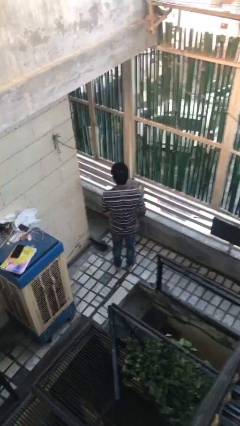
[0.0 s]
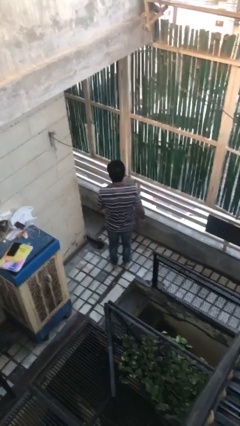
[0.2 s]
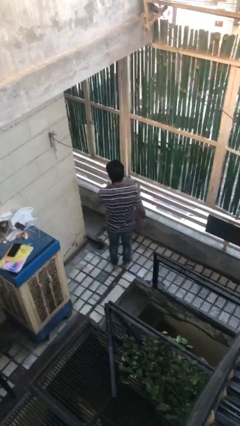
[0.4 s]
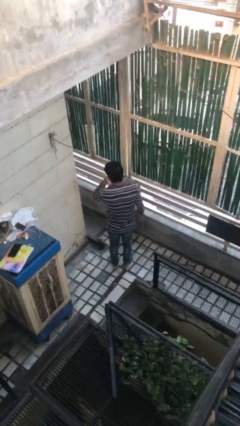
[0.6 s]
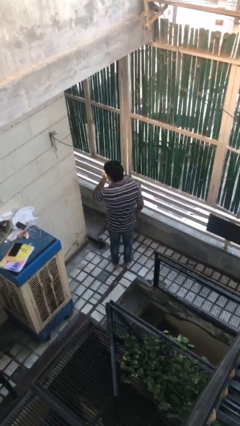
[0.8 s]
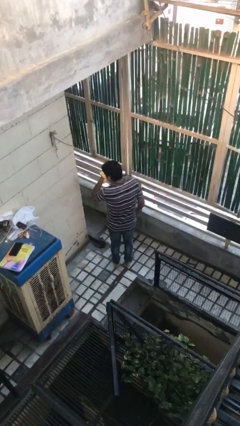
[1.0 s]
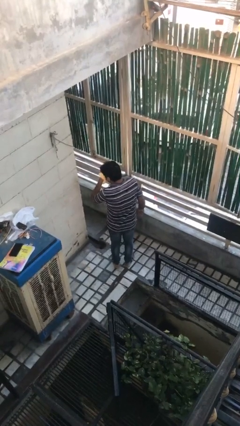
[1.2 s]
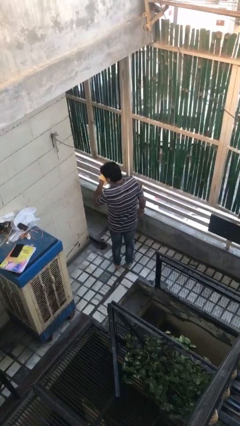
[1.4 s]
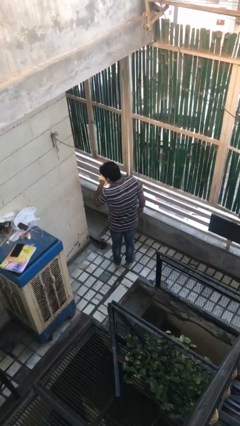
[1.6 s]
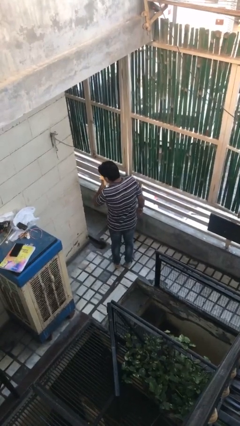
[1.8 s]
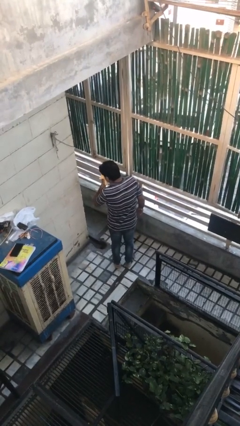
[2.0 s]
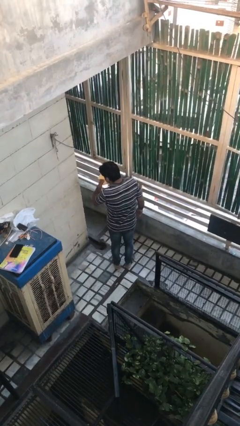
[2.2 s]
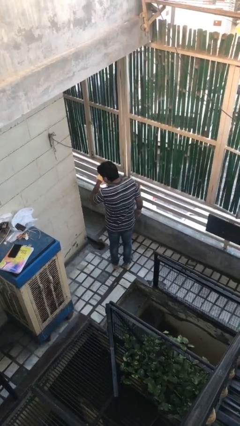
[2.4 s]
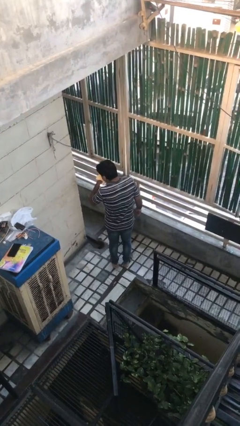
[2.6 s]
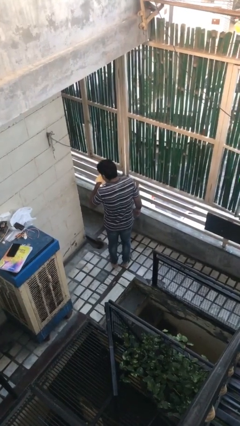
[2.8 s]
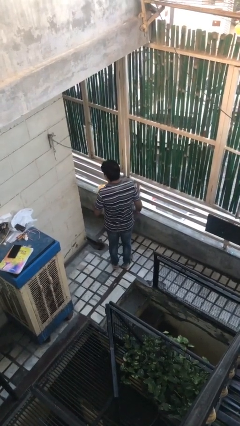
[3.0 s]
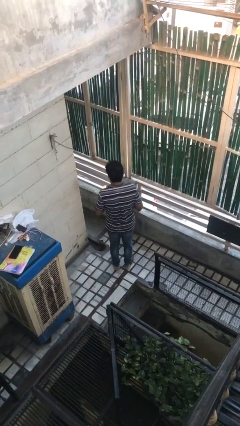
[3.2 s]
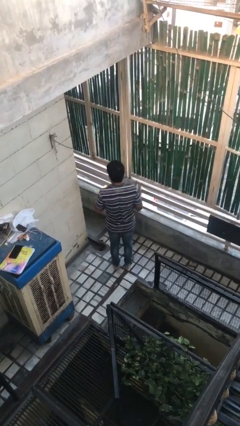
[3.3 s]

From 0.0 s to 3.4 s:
person blows nose

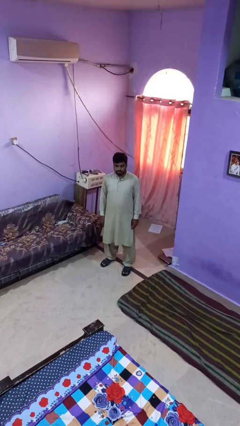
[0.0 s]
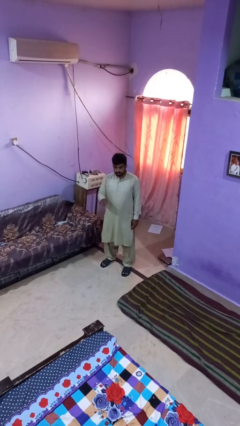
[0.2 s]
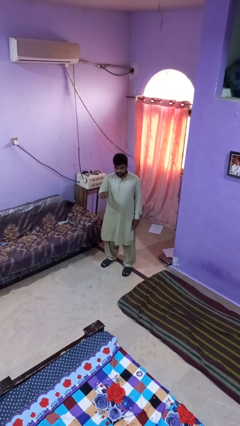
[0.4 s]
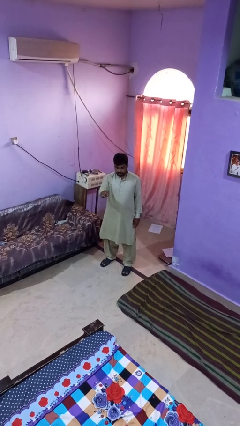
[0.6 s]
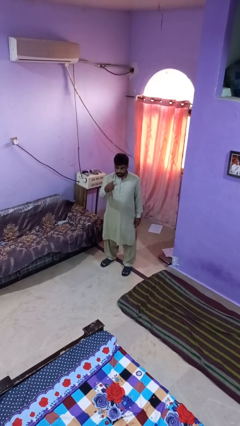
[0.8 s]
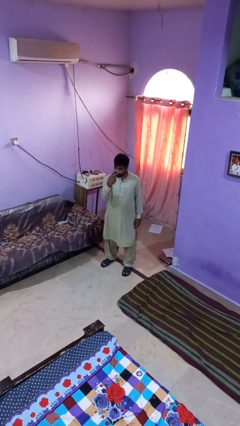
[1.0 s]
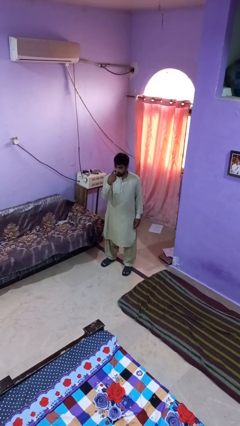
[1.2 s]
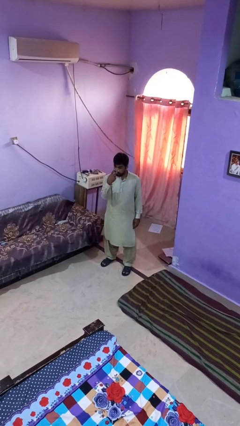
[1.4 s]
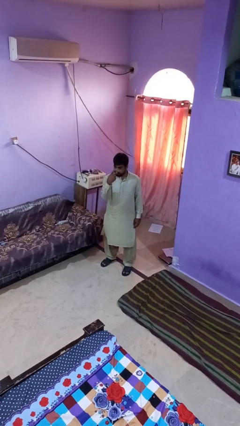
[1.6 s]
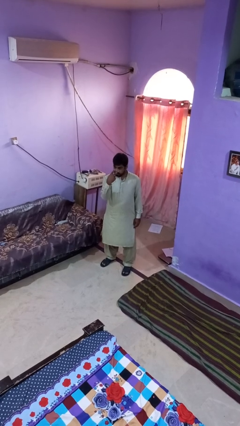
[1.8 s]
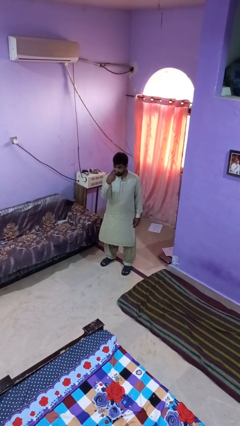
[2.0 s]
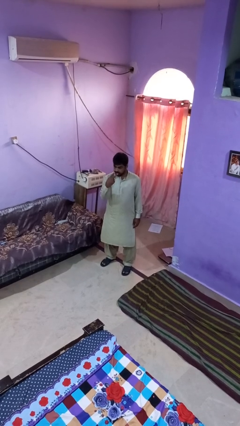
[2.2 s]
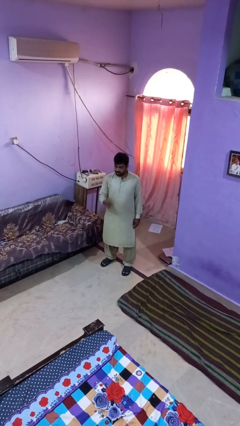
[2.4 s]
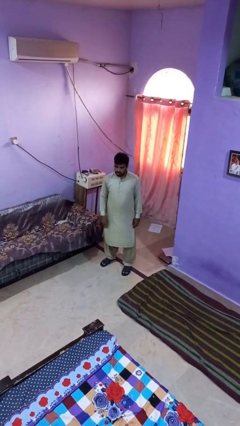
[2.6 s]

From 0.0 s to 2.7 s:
person gestures watch closely

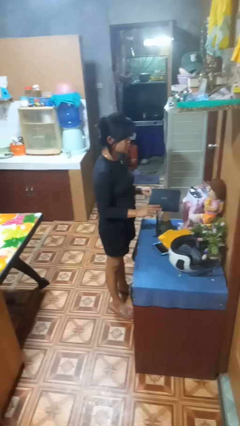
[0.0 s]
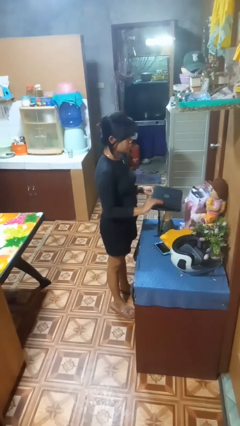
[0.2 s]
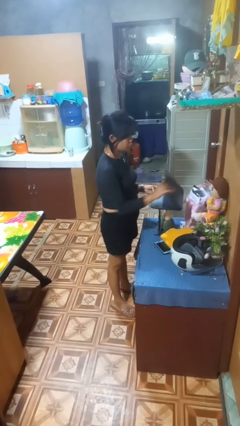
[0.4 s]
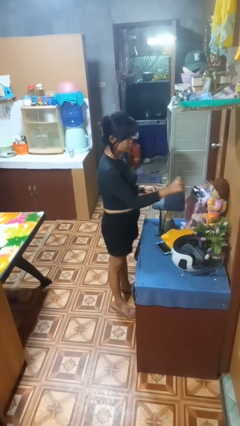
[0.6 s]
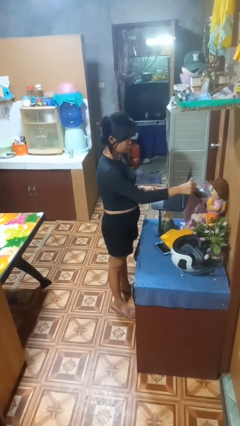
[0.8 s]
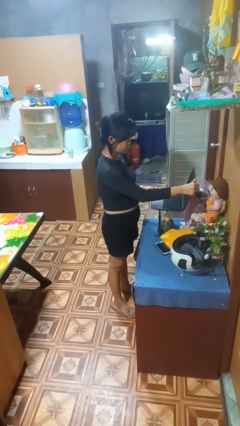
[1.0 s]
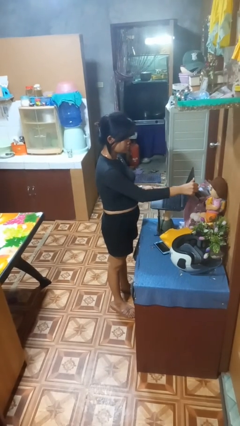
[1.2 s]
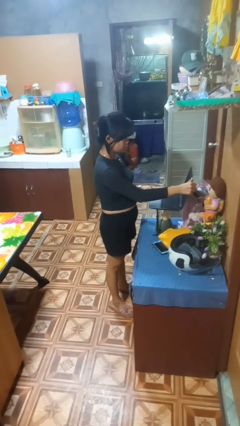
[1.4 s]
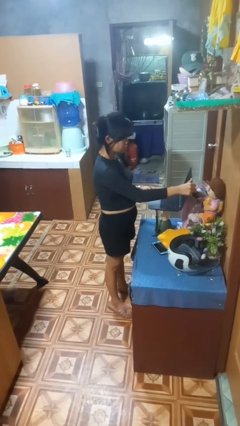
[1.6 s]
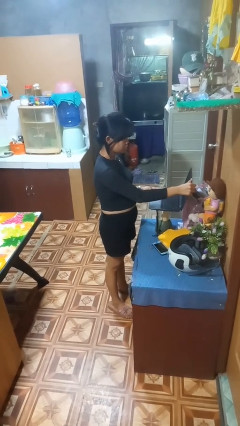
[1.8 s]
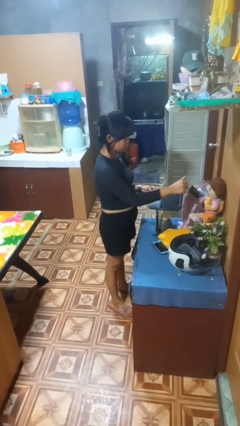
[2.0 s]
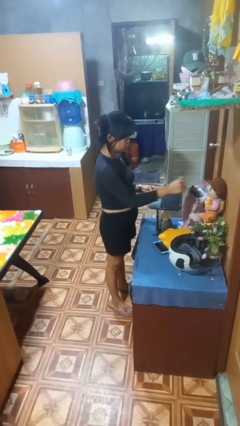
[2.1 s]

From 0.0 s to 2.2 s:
person opens laptop

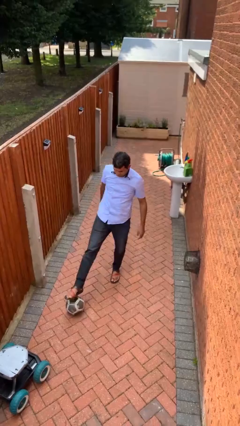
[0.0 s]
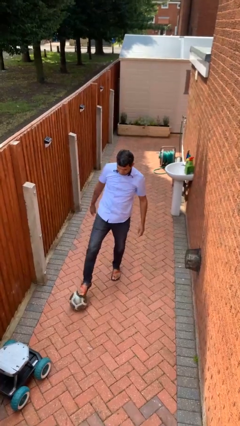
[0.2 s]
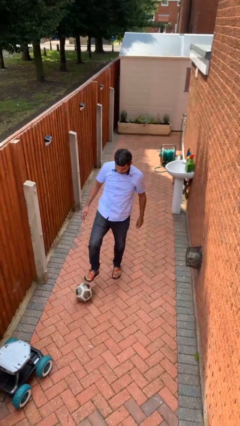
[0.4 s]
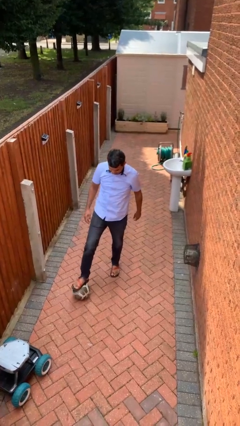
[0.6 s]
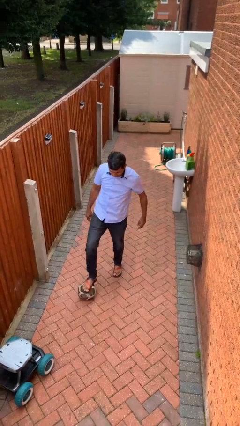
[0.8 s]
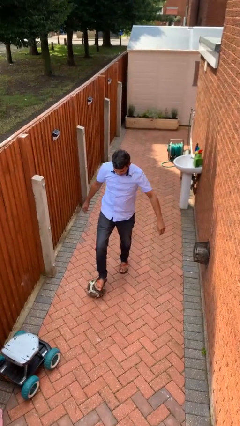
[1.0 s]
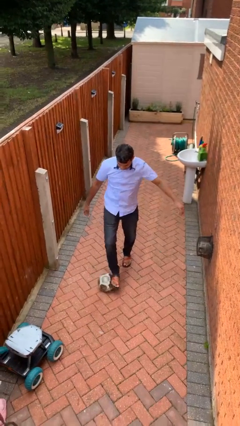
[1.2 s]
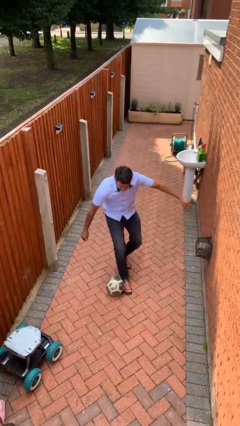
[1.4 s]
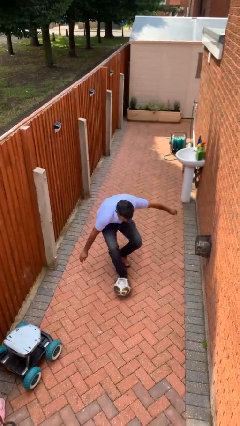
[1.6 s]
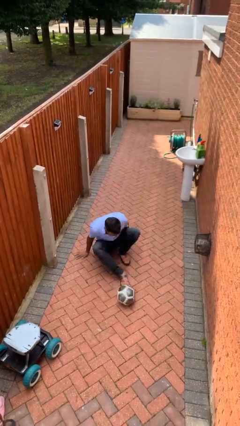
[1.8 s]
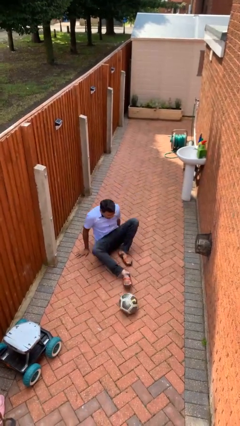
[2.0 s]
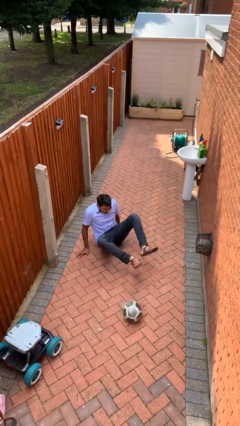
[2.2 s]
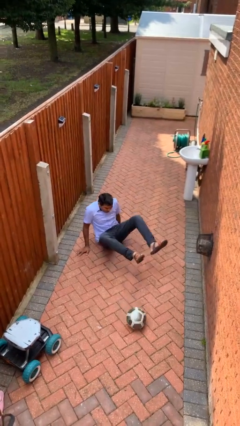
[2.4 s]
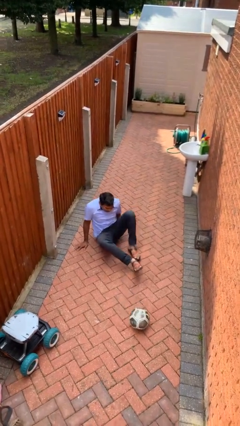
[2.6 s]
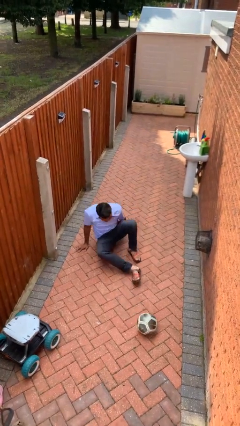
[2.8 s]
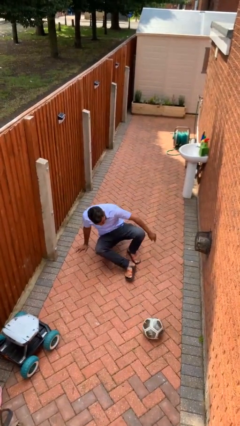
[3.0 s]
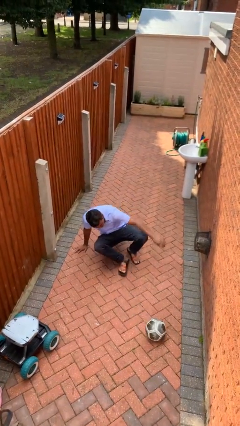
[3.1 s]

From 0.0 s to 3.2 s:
person trips on object on floor

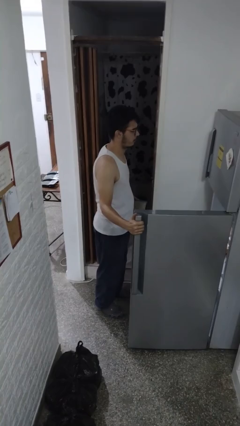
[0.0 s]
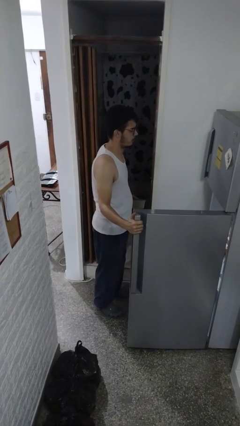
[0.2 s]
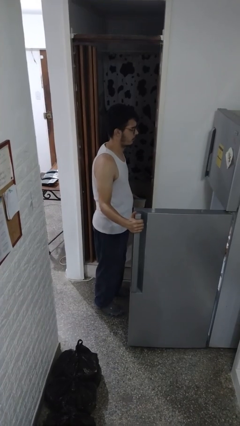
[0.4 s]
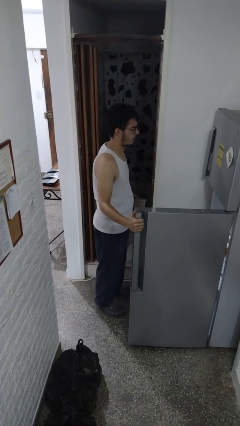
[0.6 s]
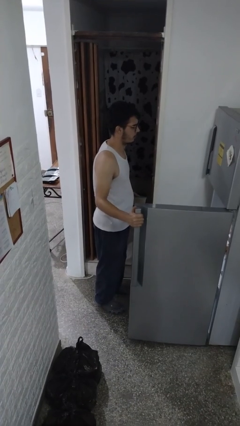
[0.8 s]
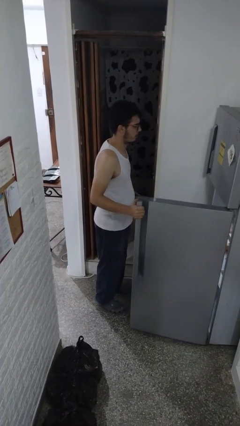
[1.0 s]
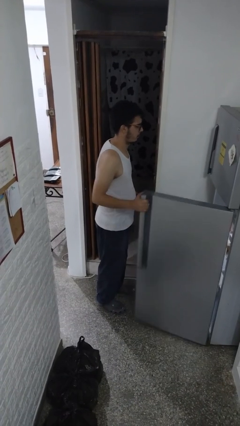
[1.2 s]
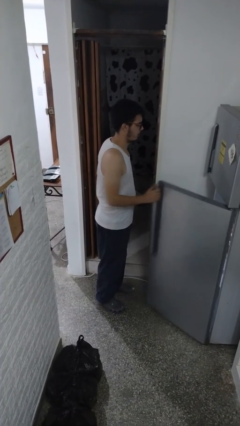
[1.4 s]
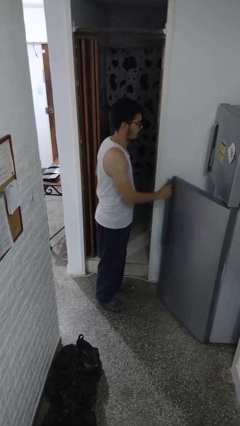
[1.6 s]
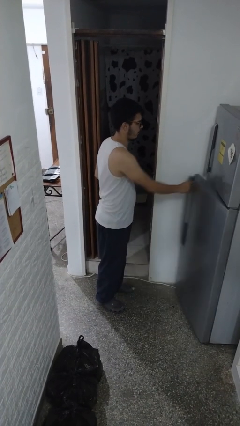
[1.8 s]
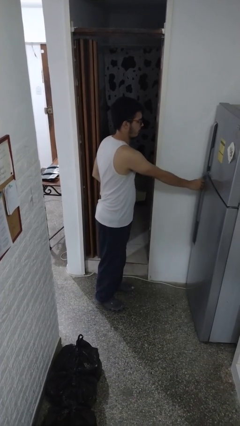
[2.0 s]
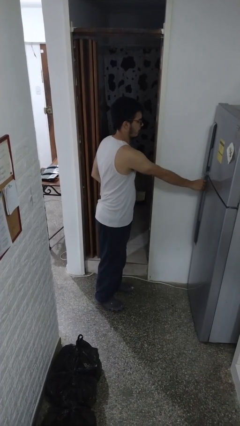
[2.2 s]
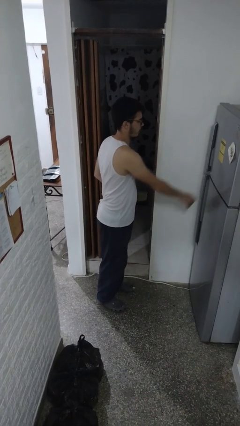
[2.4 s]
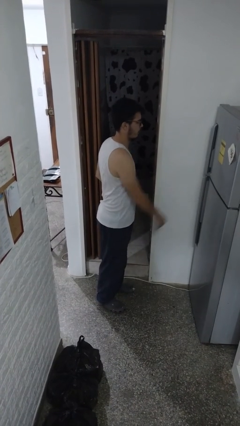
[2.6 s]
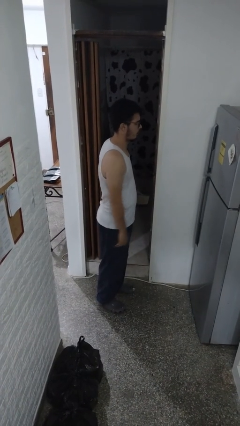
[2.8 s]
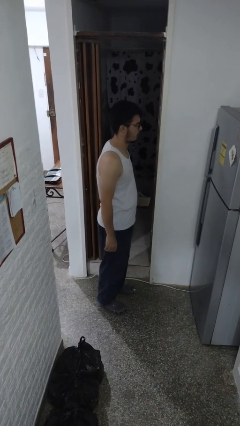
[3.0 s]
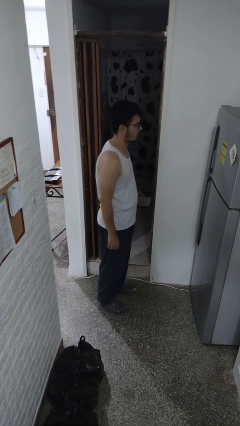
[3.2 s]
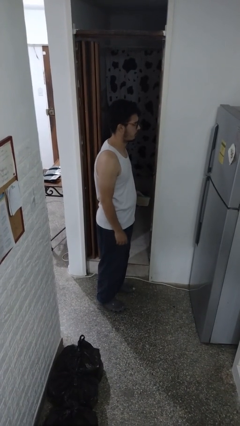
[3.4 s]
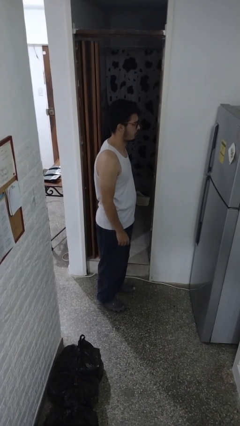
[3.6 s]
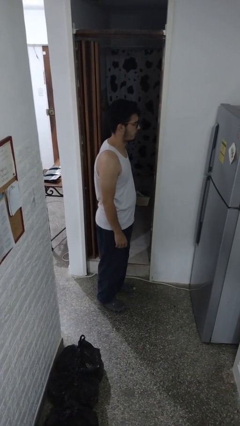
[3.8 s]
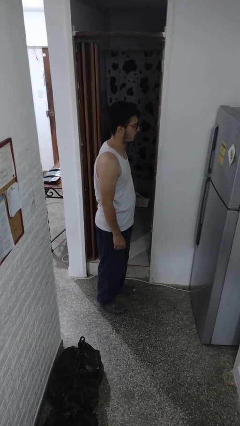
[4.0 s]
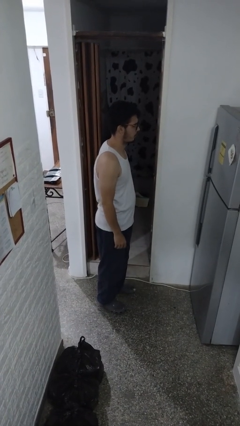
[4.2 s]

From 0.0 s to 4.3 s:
person closes refrigerator

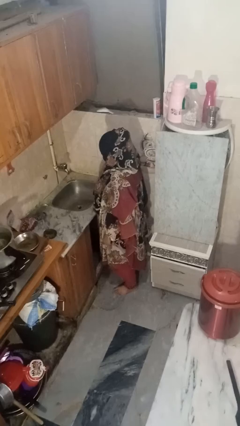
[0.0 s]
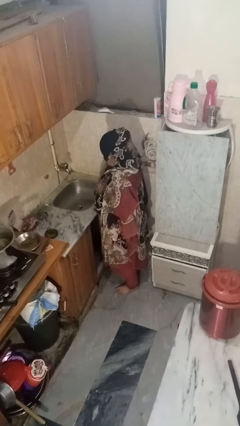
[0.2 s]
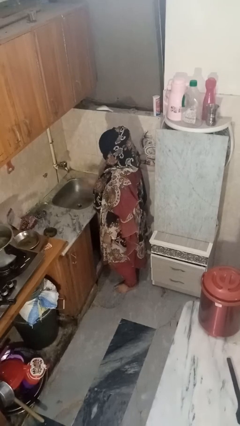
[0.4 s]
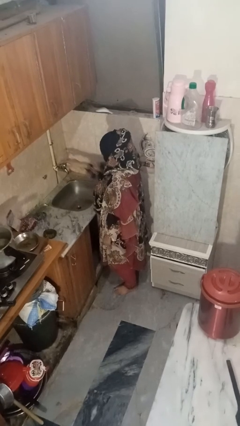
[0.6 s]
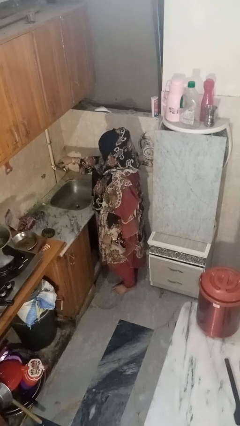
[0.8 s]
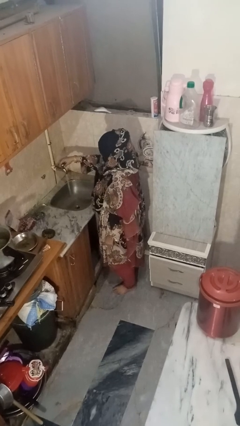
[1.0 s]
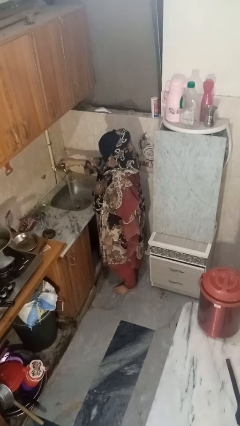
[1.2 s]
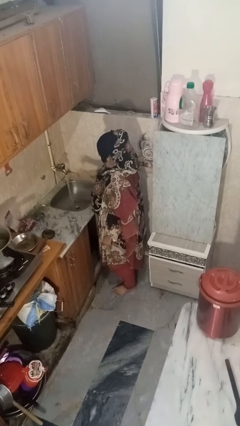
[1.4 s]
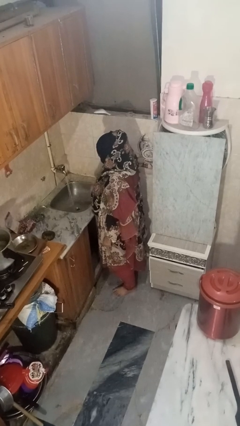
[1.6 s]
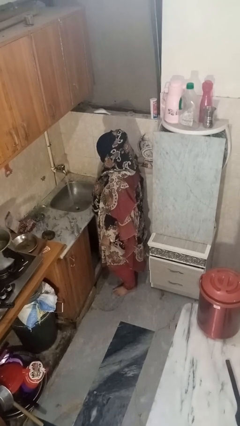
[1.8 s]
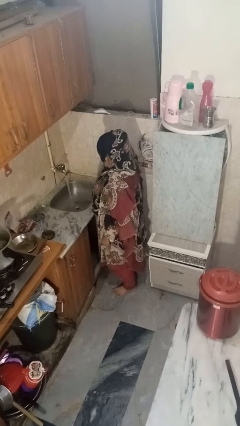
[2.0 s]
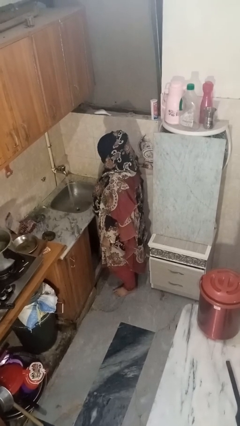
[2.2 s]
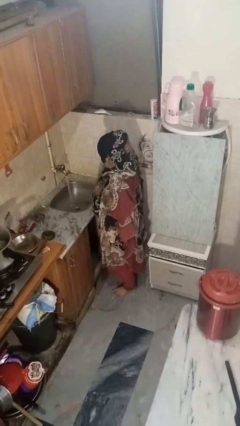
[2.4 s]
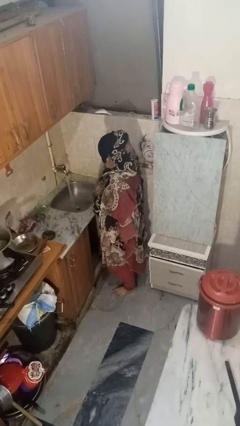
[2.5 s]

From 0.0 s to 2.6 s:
person turns on faucet
